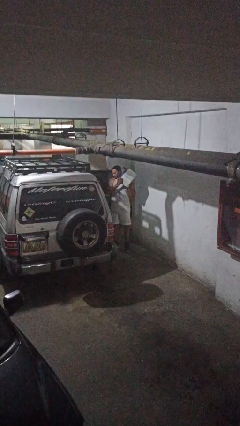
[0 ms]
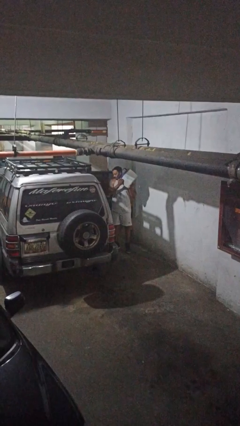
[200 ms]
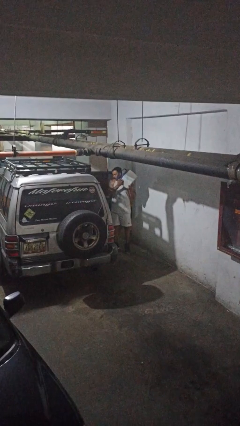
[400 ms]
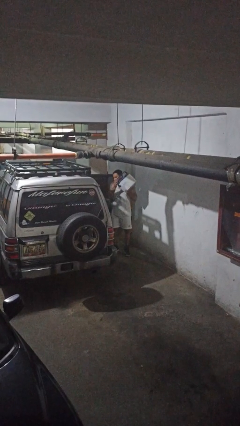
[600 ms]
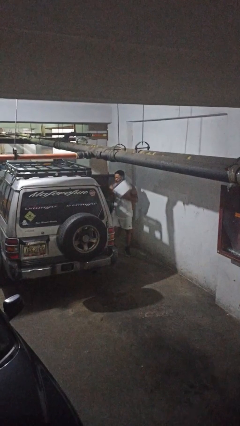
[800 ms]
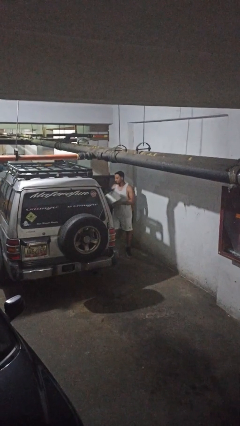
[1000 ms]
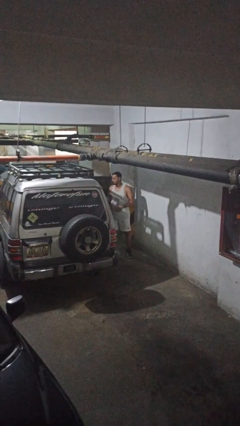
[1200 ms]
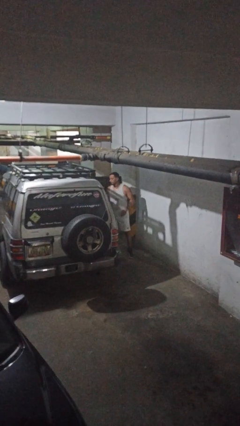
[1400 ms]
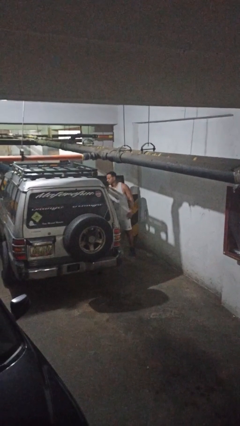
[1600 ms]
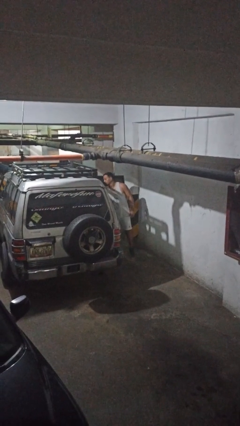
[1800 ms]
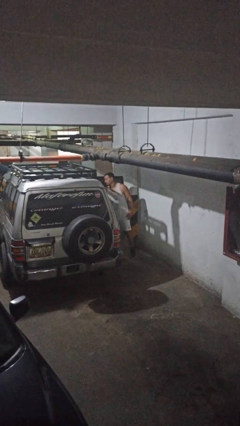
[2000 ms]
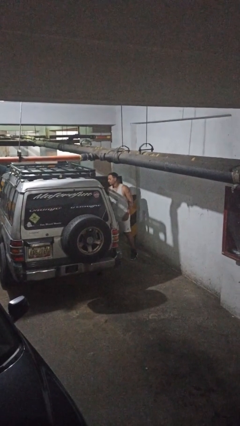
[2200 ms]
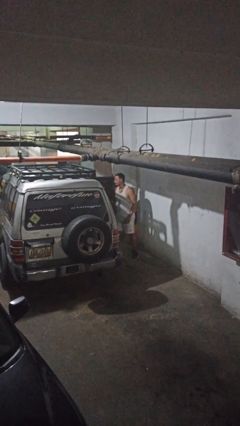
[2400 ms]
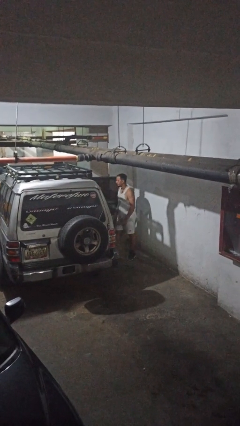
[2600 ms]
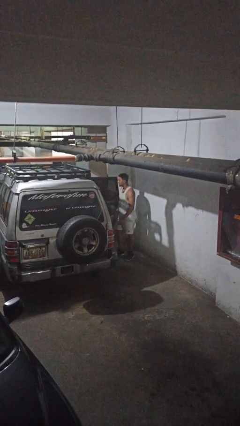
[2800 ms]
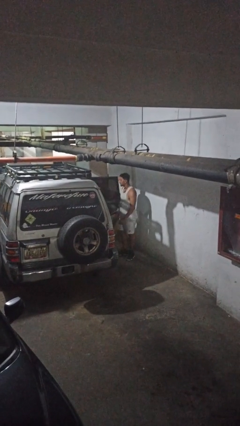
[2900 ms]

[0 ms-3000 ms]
person loads car

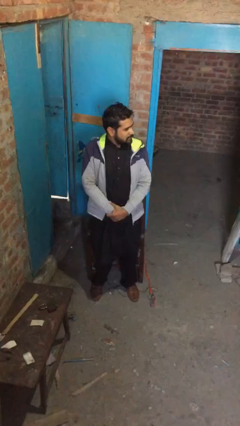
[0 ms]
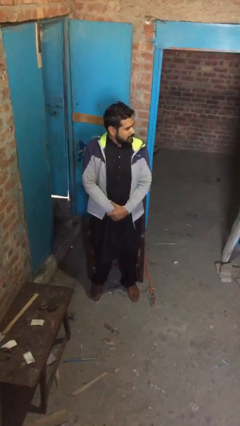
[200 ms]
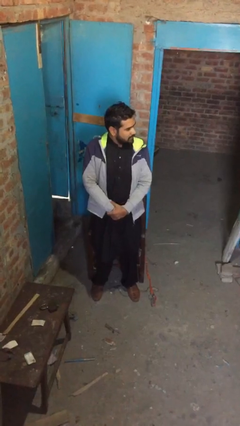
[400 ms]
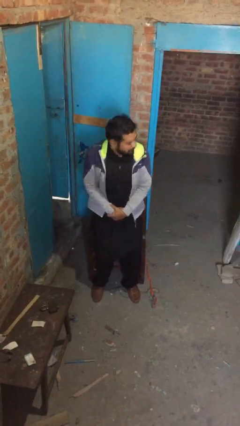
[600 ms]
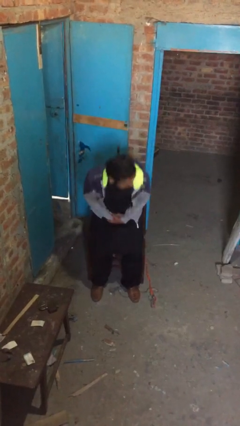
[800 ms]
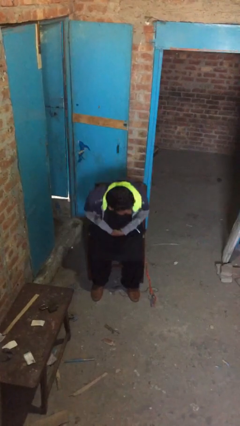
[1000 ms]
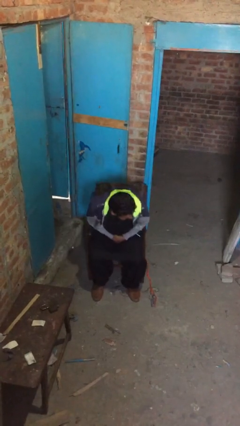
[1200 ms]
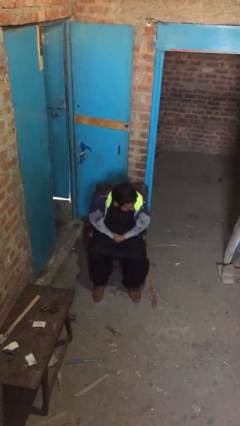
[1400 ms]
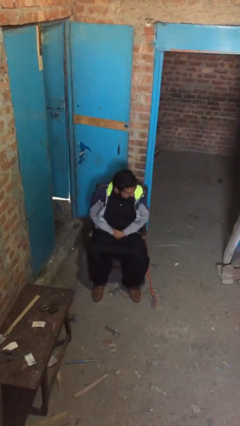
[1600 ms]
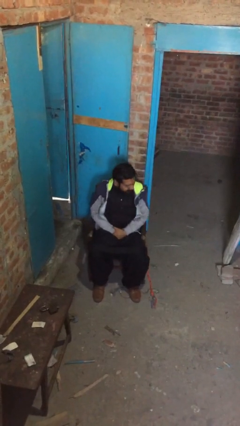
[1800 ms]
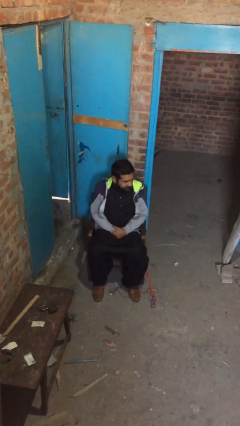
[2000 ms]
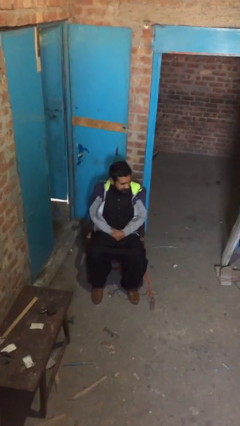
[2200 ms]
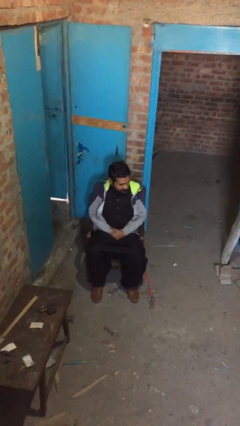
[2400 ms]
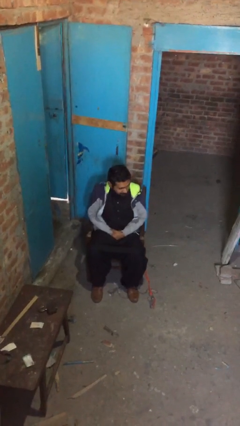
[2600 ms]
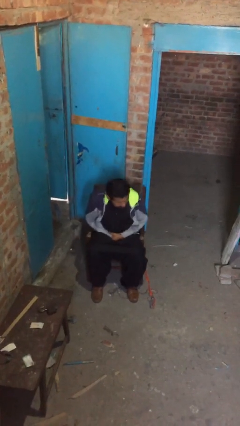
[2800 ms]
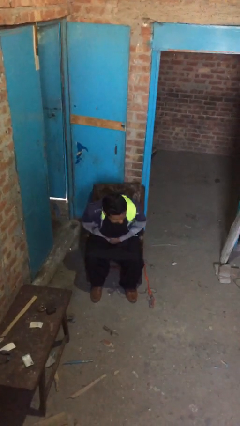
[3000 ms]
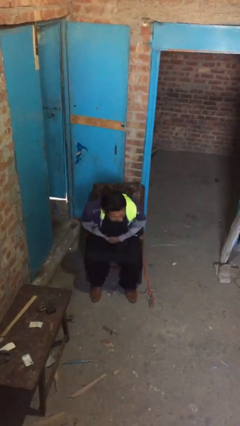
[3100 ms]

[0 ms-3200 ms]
person sits down

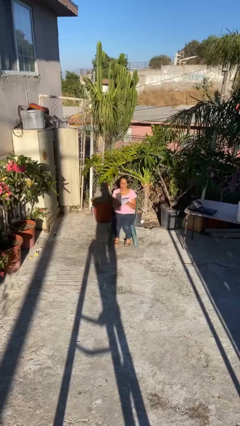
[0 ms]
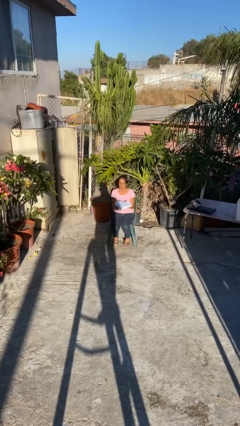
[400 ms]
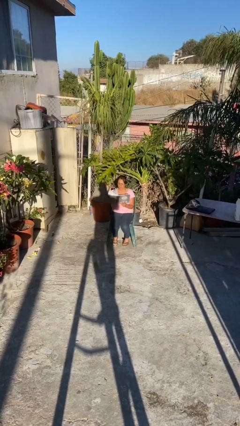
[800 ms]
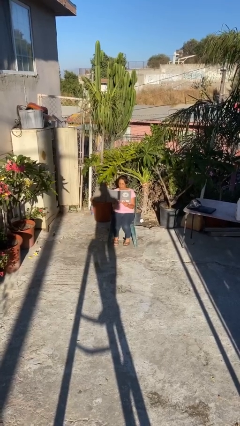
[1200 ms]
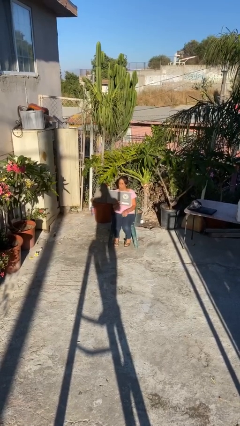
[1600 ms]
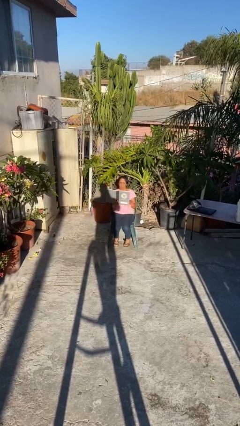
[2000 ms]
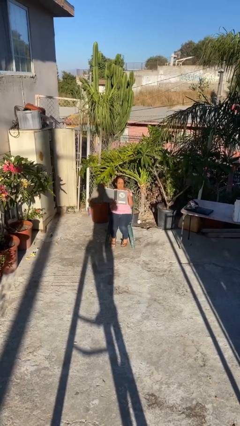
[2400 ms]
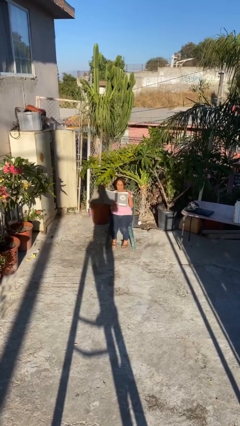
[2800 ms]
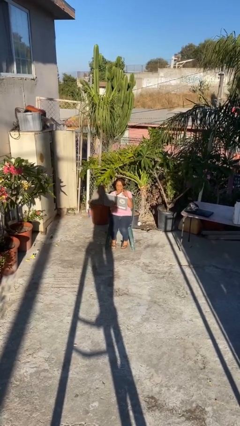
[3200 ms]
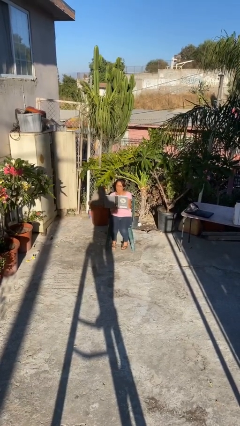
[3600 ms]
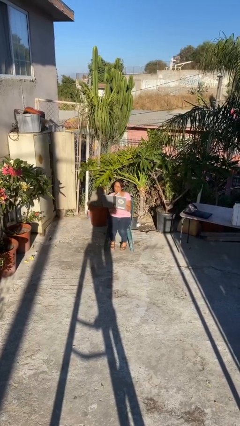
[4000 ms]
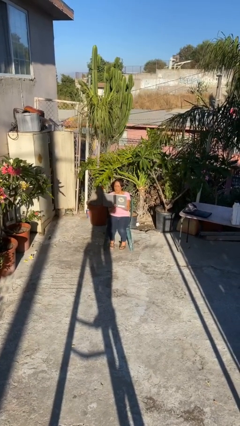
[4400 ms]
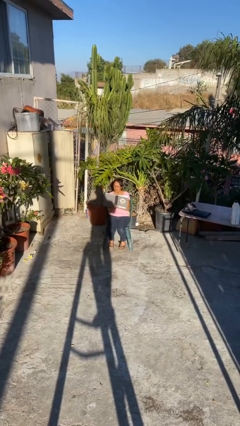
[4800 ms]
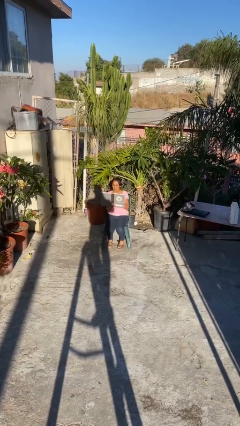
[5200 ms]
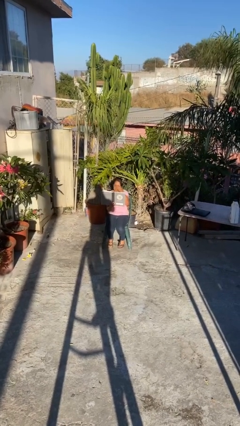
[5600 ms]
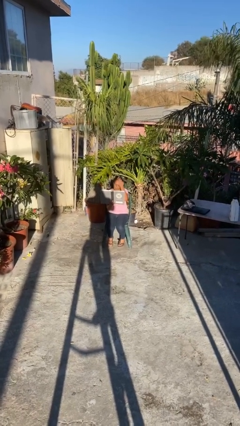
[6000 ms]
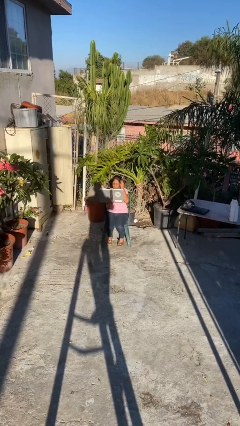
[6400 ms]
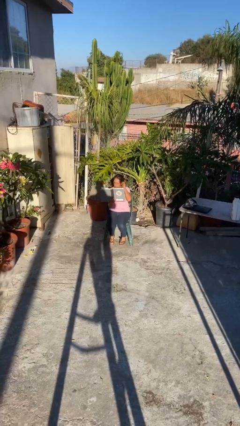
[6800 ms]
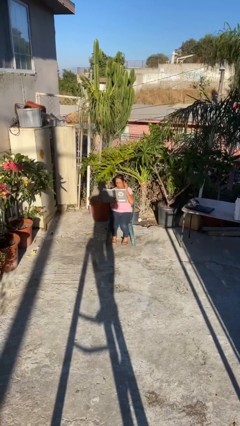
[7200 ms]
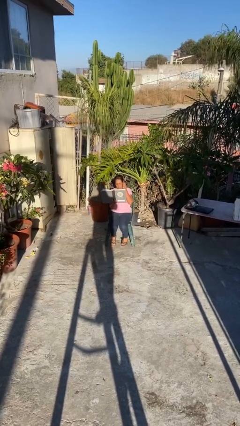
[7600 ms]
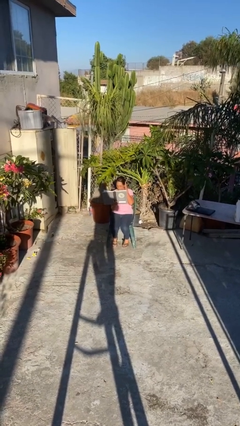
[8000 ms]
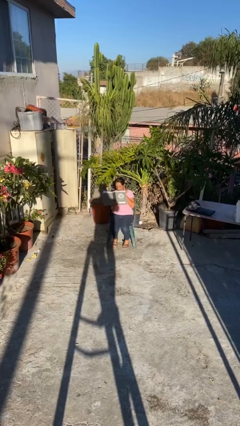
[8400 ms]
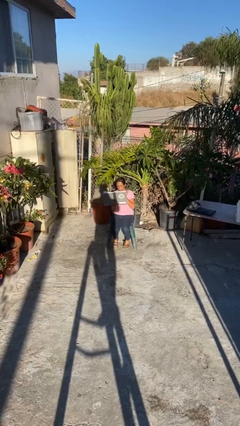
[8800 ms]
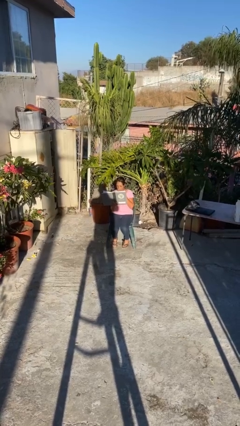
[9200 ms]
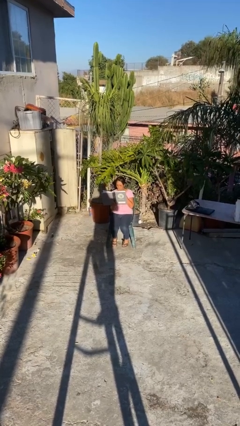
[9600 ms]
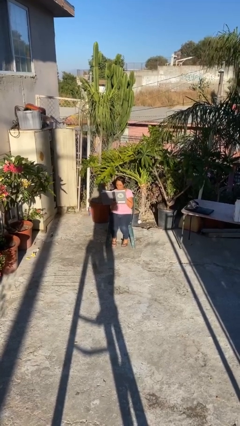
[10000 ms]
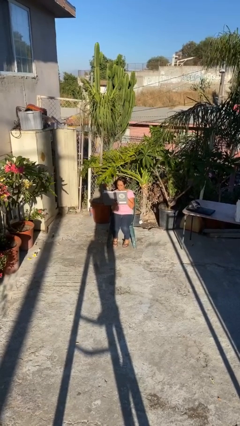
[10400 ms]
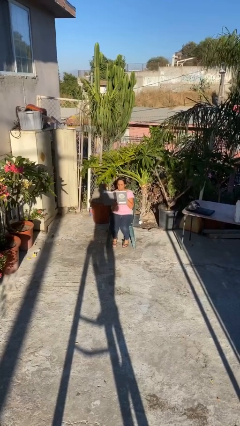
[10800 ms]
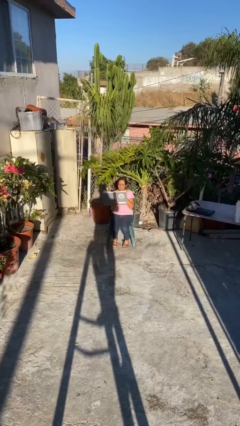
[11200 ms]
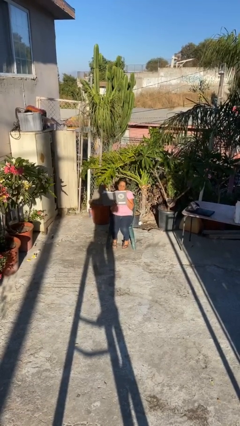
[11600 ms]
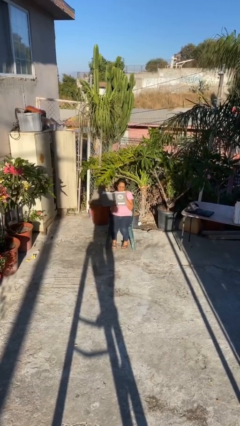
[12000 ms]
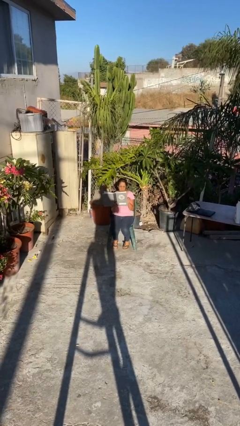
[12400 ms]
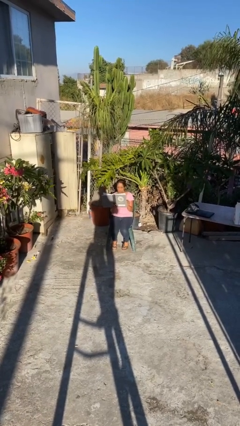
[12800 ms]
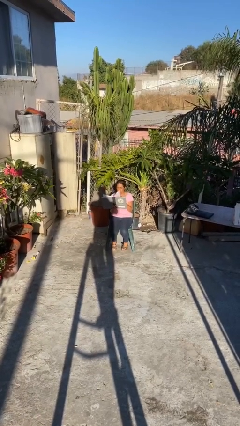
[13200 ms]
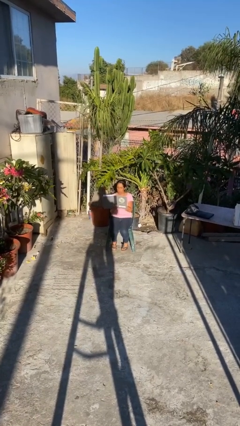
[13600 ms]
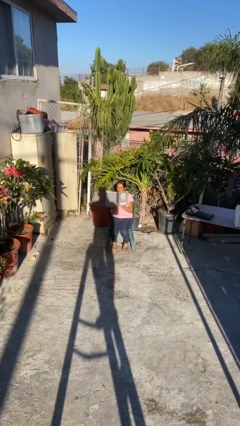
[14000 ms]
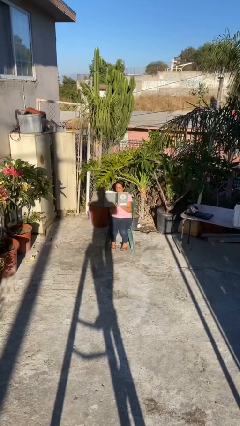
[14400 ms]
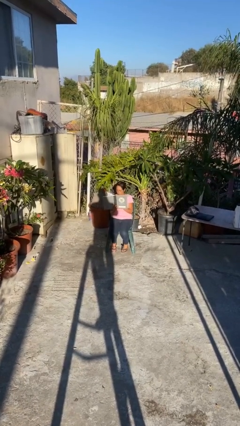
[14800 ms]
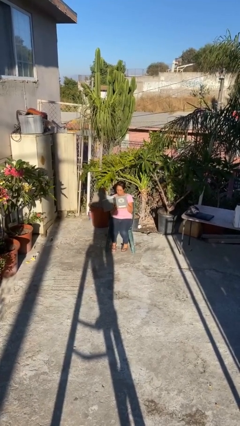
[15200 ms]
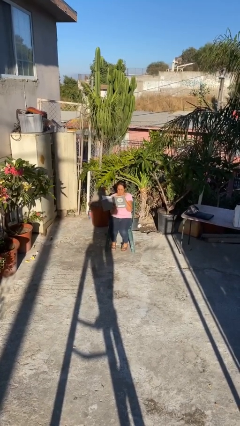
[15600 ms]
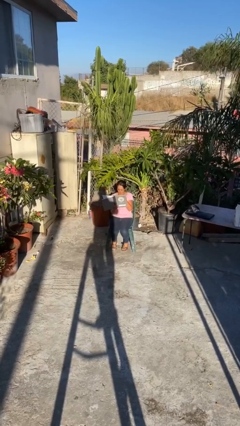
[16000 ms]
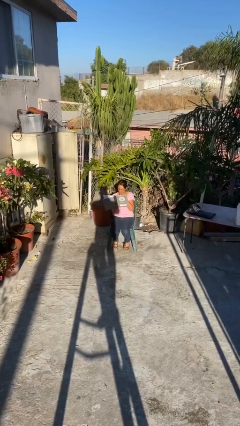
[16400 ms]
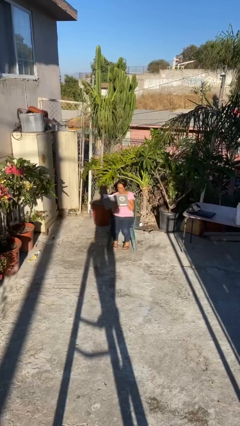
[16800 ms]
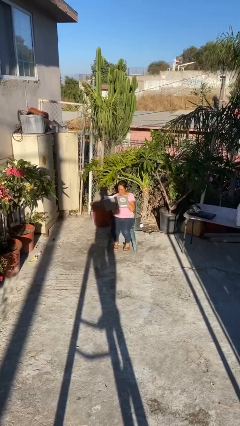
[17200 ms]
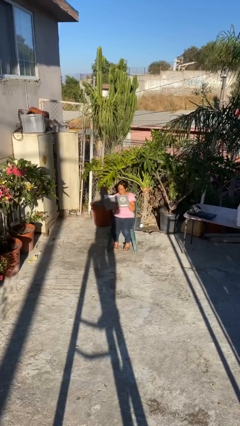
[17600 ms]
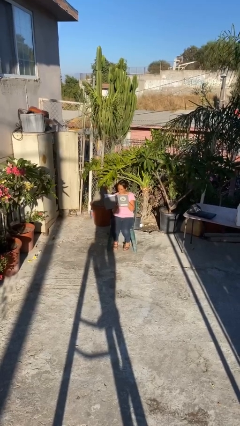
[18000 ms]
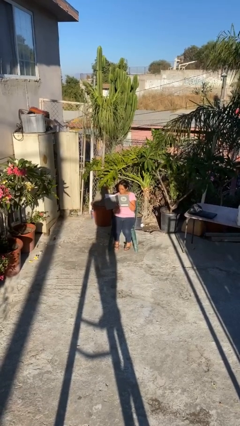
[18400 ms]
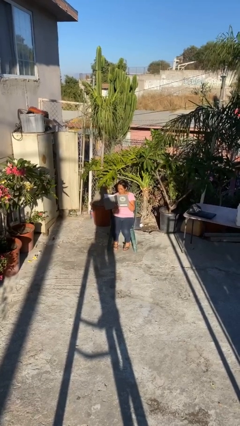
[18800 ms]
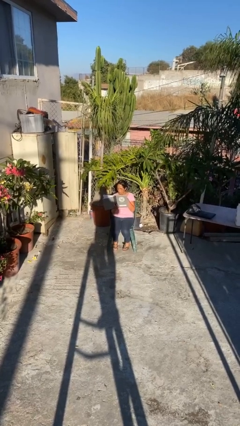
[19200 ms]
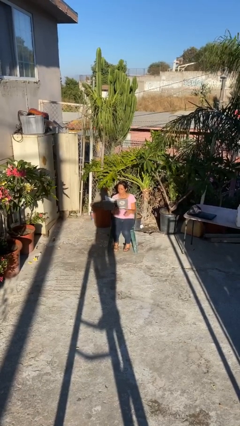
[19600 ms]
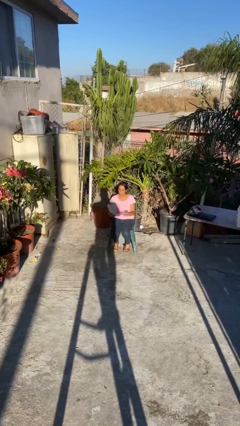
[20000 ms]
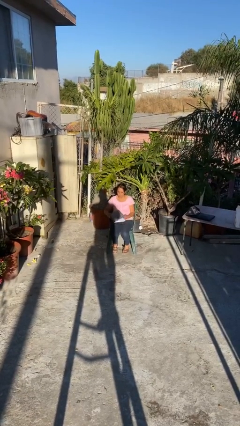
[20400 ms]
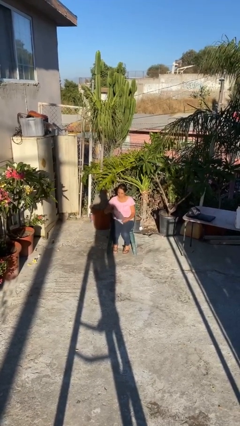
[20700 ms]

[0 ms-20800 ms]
person reads document

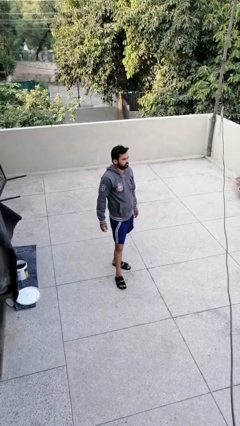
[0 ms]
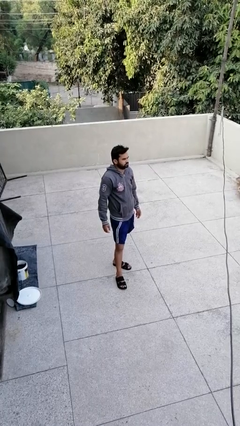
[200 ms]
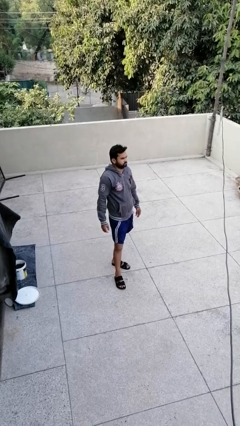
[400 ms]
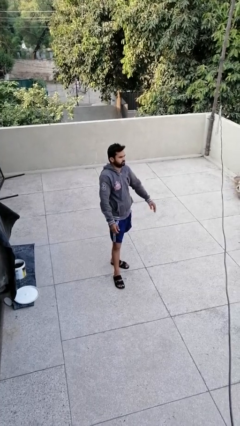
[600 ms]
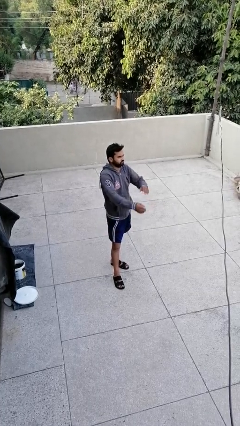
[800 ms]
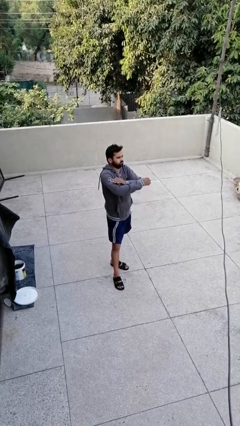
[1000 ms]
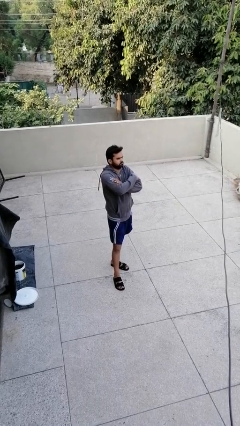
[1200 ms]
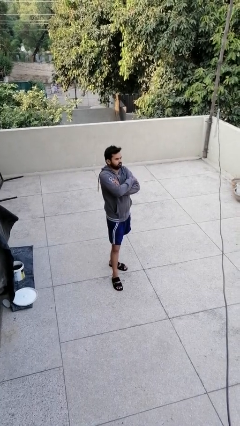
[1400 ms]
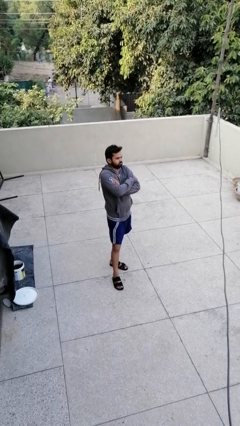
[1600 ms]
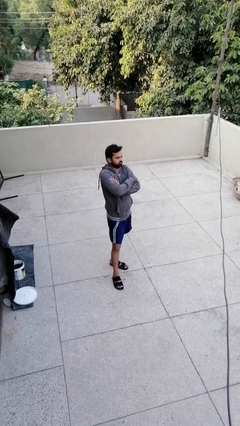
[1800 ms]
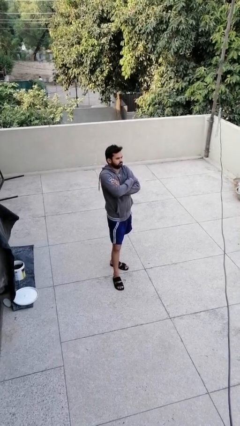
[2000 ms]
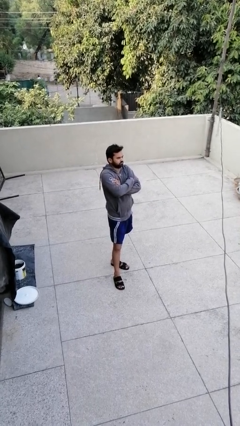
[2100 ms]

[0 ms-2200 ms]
person crosses arms
